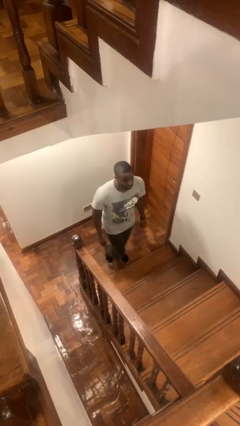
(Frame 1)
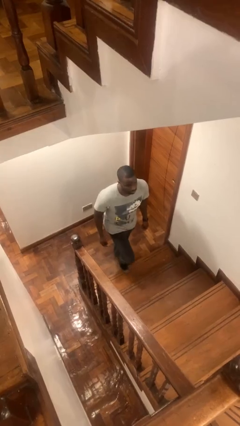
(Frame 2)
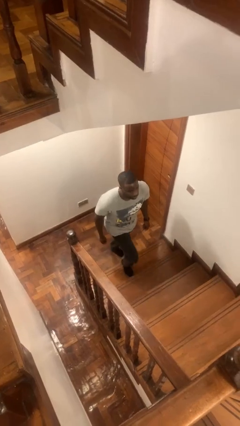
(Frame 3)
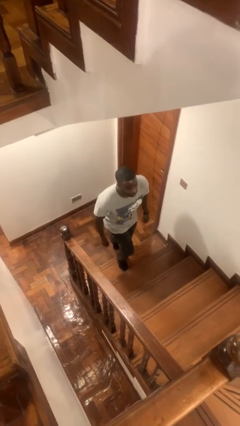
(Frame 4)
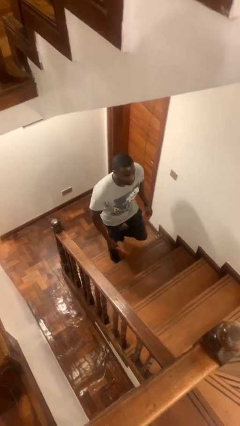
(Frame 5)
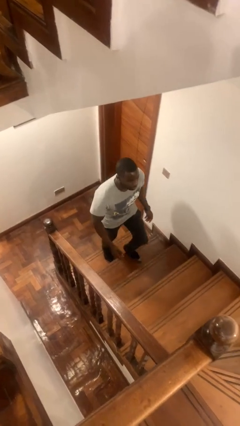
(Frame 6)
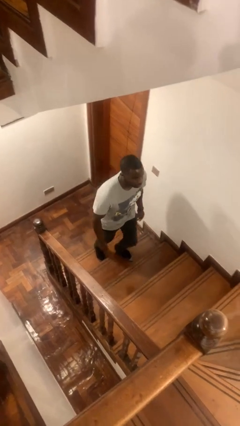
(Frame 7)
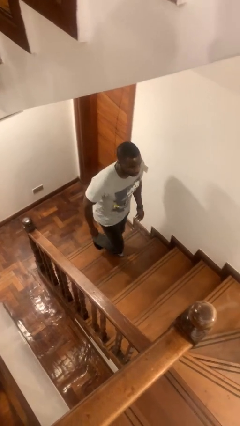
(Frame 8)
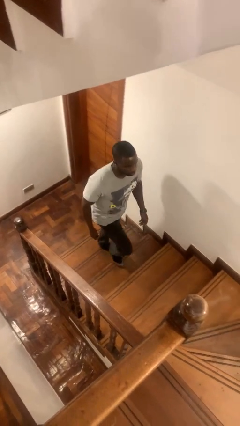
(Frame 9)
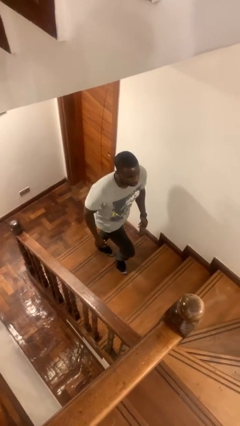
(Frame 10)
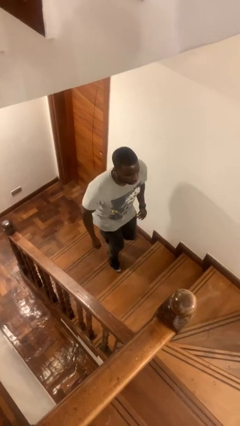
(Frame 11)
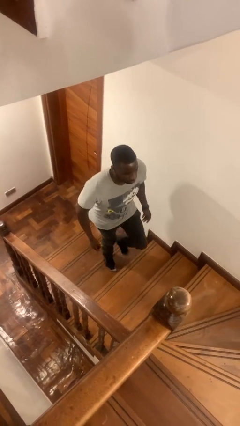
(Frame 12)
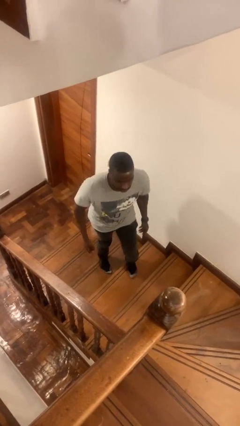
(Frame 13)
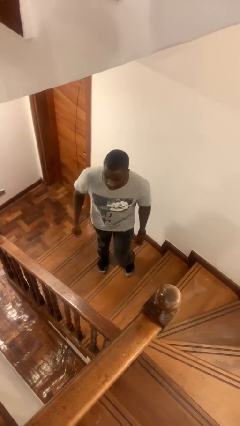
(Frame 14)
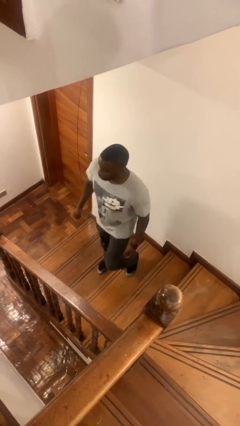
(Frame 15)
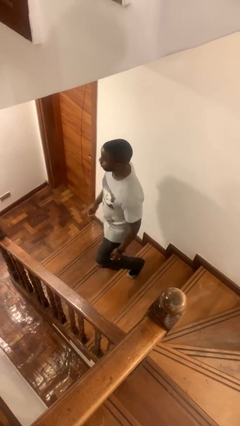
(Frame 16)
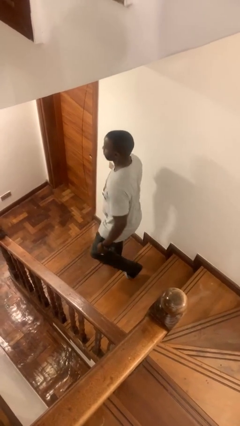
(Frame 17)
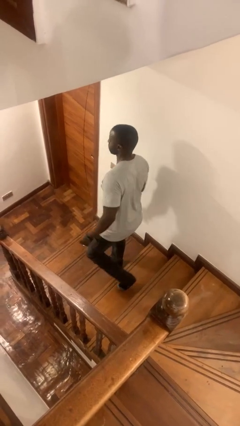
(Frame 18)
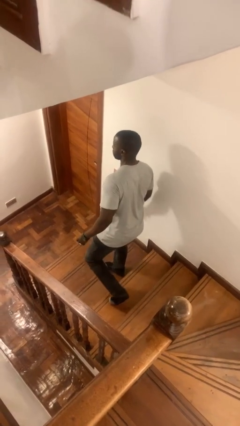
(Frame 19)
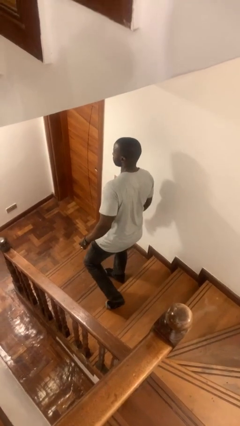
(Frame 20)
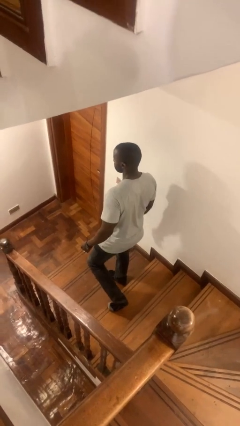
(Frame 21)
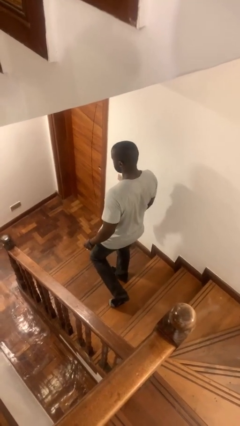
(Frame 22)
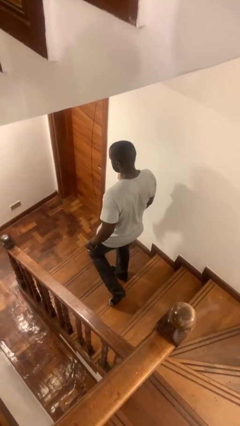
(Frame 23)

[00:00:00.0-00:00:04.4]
person climbs up stairs

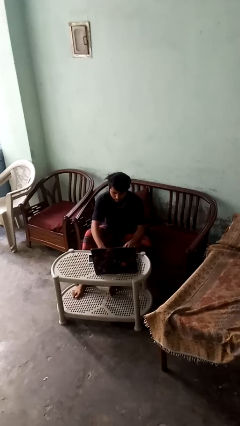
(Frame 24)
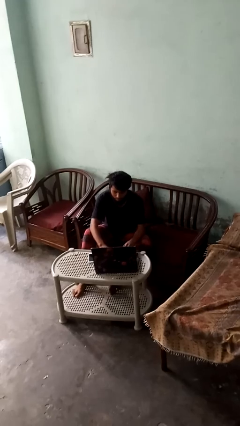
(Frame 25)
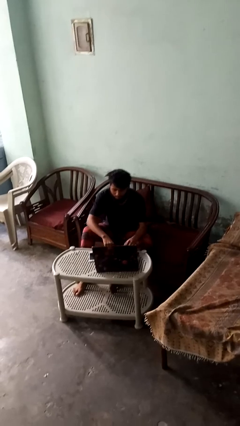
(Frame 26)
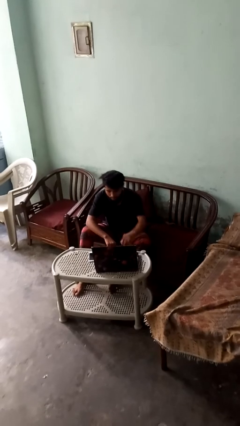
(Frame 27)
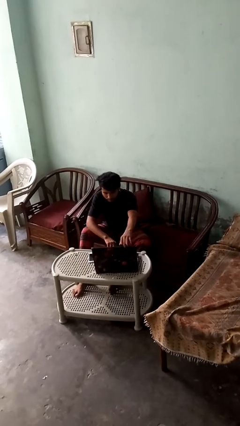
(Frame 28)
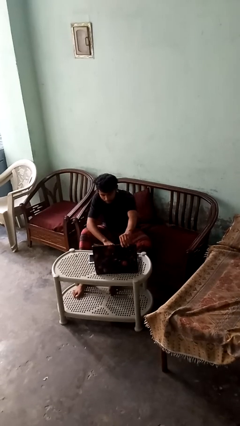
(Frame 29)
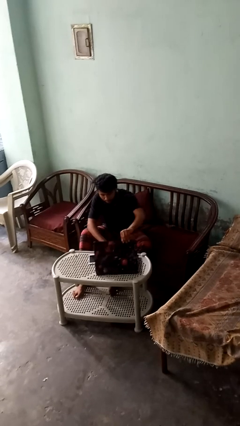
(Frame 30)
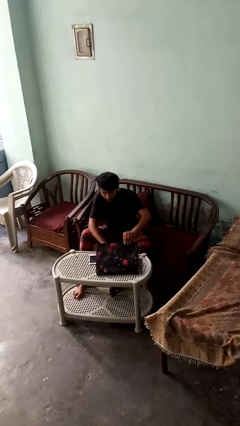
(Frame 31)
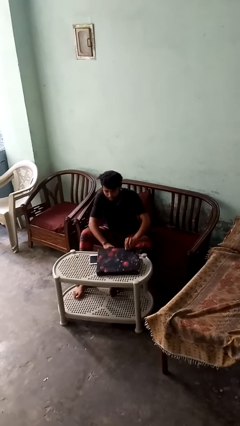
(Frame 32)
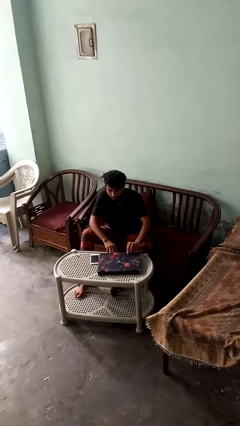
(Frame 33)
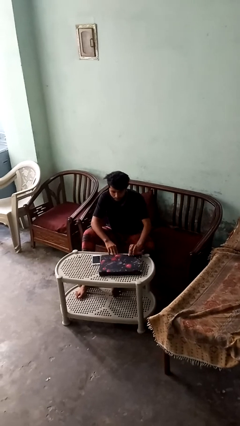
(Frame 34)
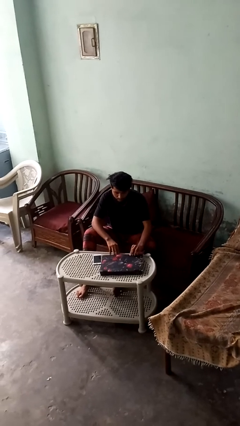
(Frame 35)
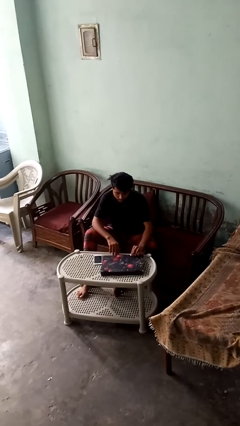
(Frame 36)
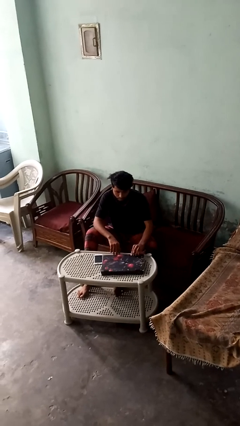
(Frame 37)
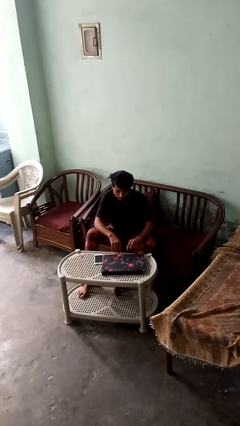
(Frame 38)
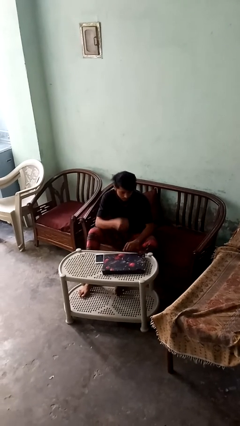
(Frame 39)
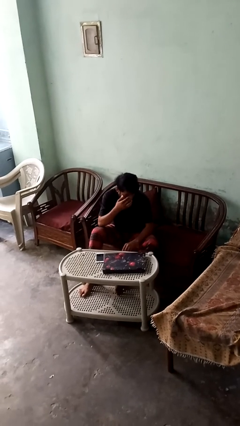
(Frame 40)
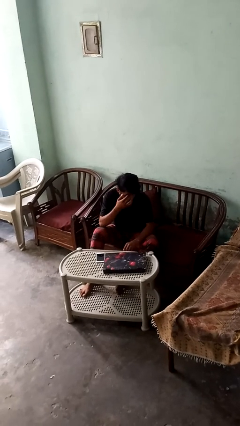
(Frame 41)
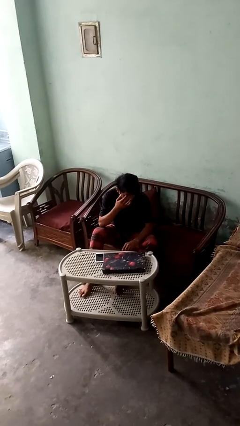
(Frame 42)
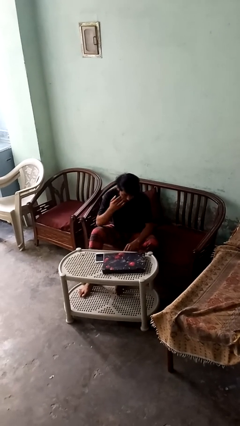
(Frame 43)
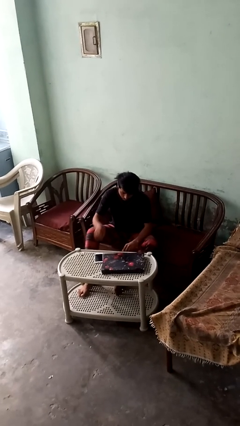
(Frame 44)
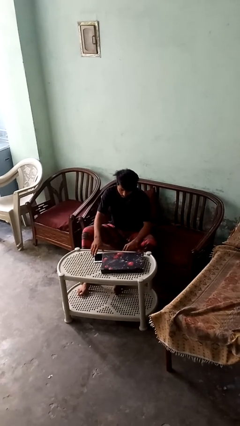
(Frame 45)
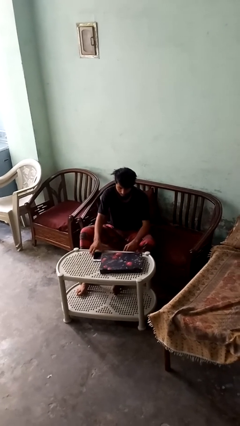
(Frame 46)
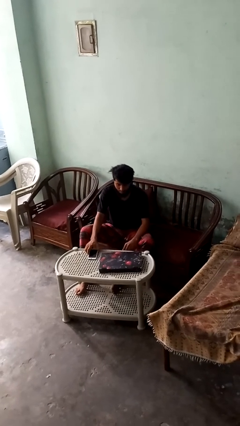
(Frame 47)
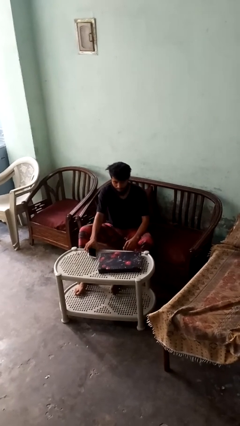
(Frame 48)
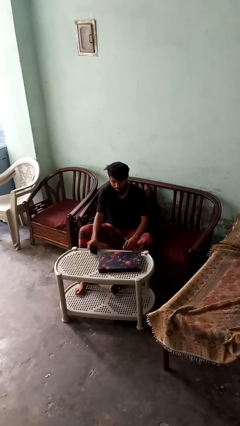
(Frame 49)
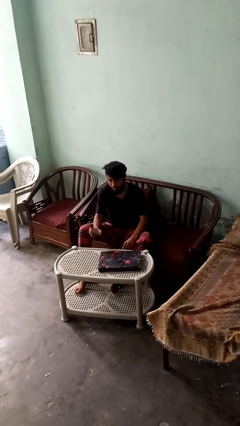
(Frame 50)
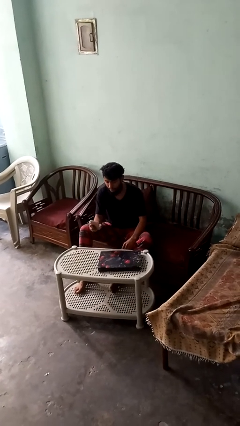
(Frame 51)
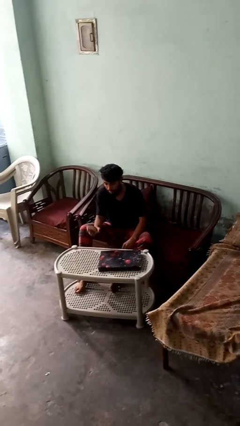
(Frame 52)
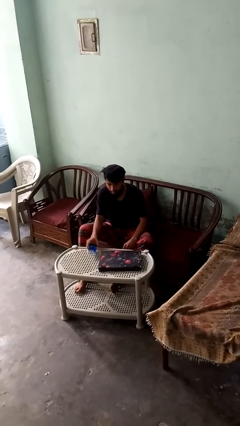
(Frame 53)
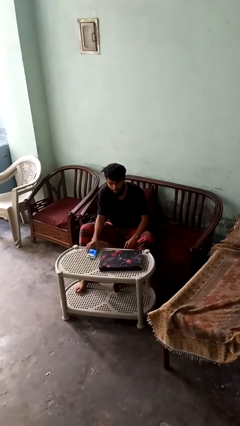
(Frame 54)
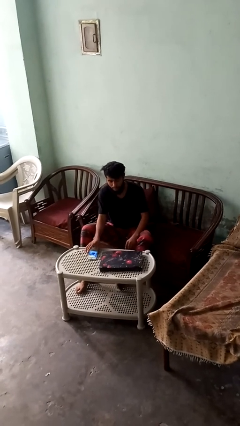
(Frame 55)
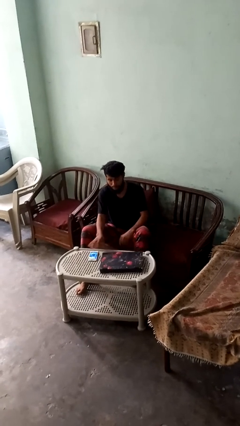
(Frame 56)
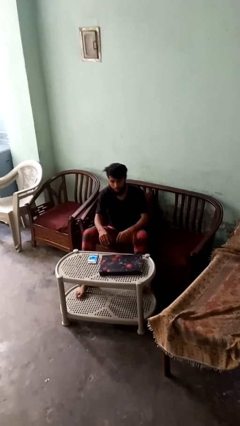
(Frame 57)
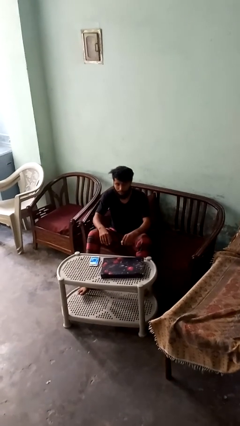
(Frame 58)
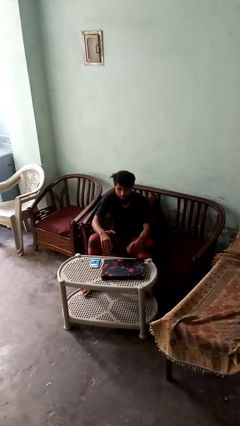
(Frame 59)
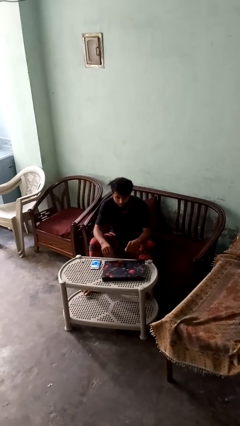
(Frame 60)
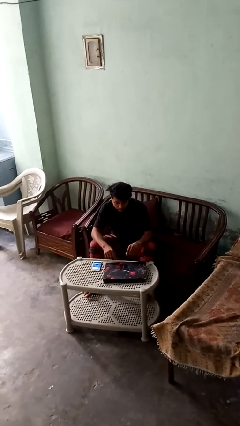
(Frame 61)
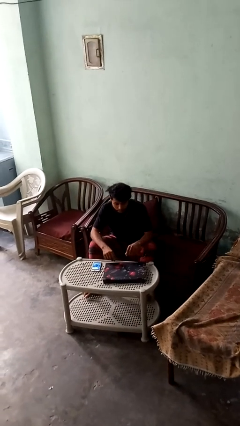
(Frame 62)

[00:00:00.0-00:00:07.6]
person closes laptop

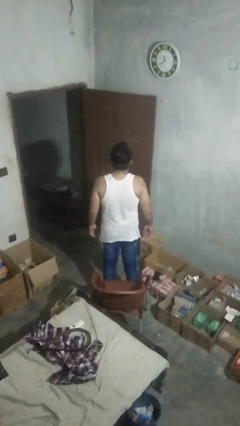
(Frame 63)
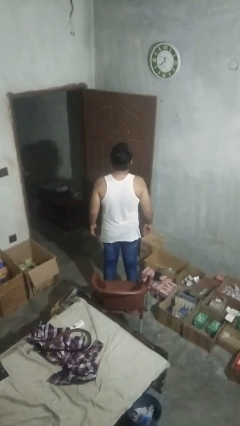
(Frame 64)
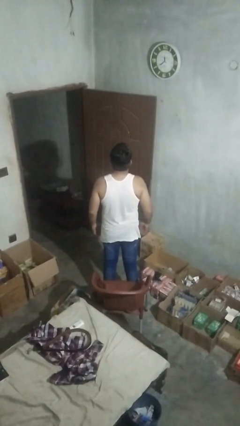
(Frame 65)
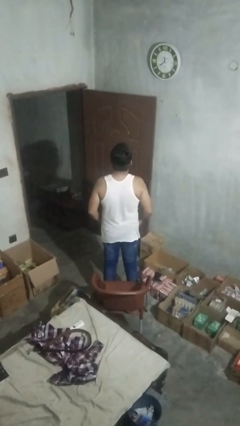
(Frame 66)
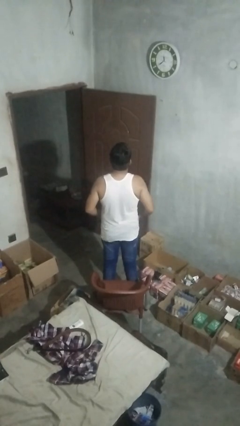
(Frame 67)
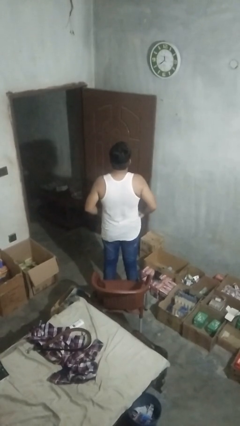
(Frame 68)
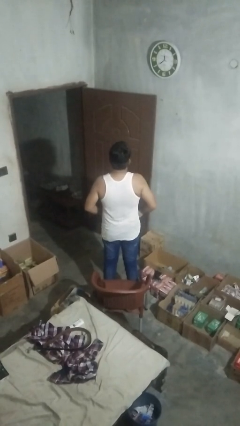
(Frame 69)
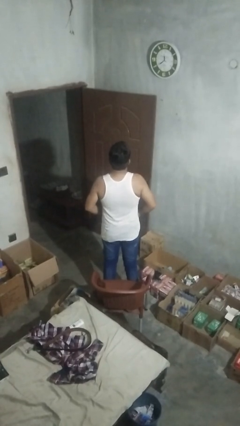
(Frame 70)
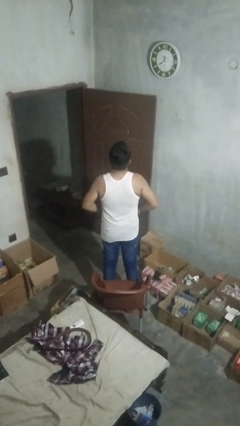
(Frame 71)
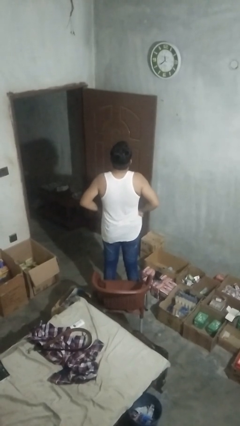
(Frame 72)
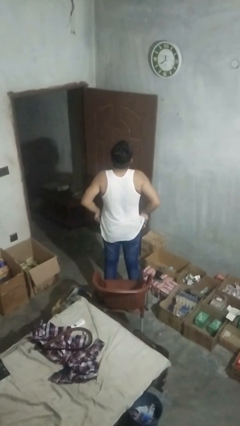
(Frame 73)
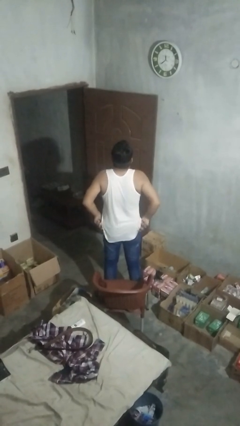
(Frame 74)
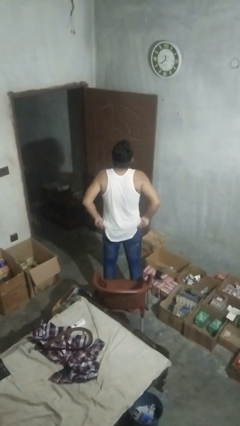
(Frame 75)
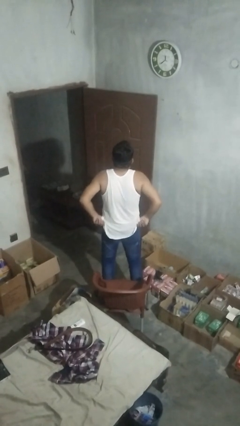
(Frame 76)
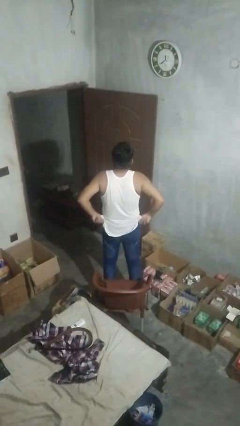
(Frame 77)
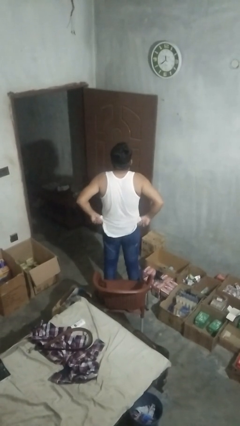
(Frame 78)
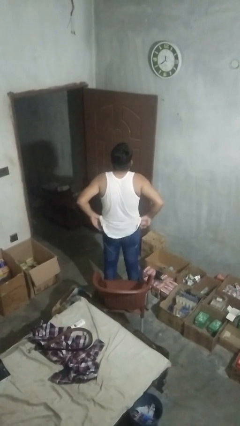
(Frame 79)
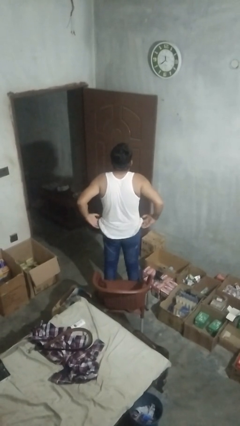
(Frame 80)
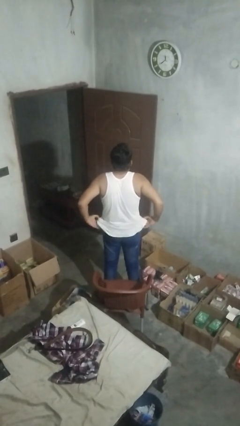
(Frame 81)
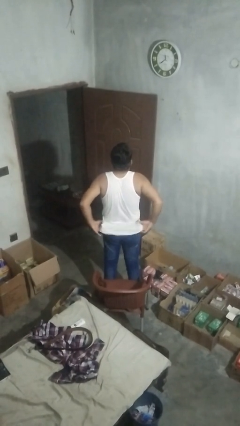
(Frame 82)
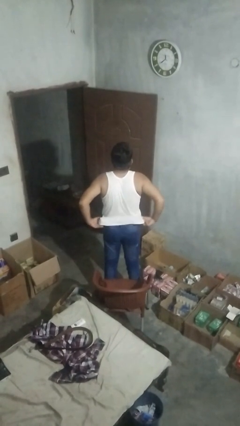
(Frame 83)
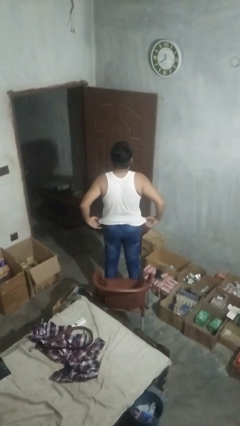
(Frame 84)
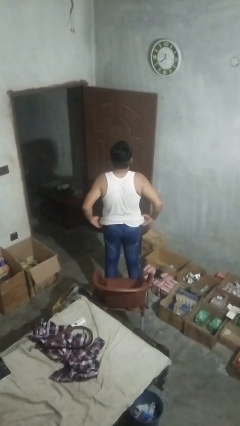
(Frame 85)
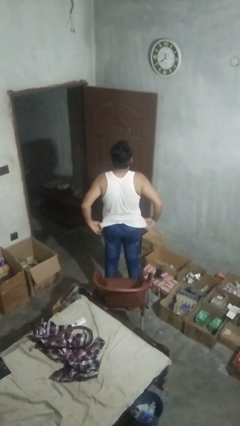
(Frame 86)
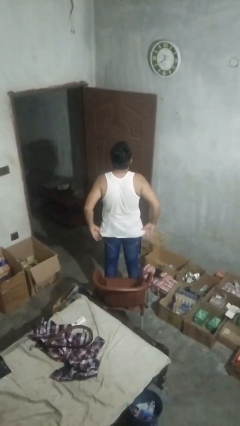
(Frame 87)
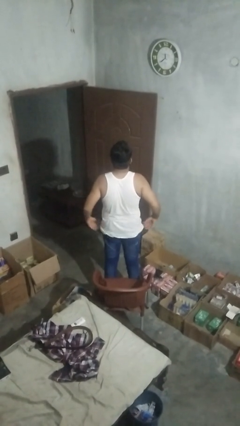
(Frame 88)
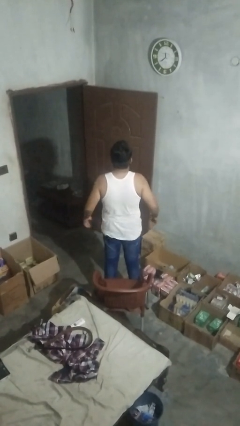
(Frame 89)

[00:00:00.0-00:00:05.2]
person hikes up pants

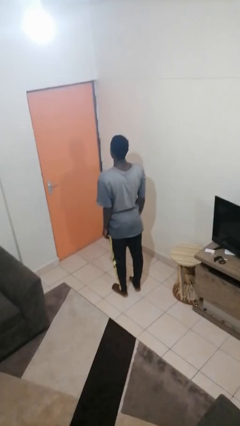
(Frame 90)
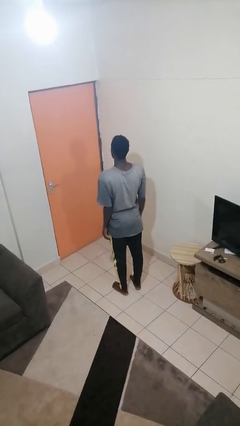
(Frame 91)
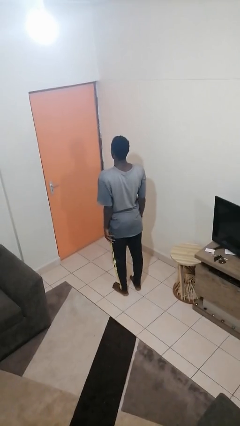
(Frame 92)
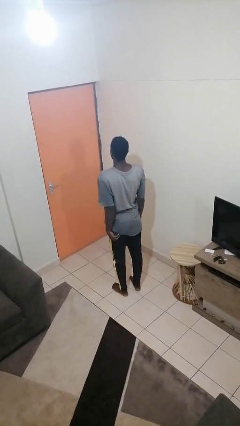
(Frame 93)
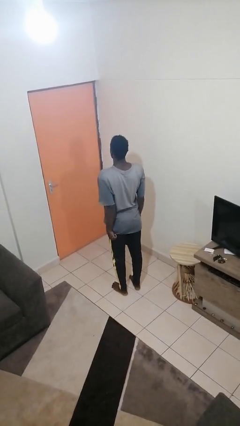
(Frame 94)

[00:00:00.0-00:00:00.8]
person stands up from floor
